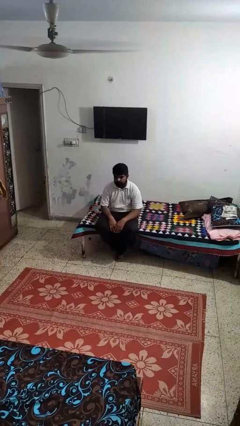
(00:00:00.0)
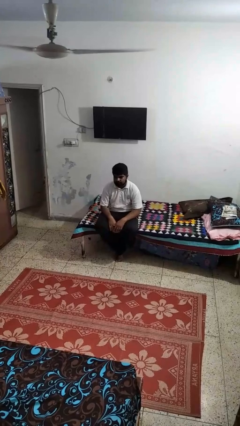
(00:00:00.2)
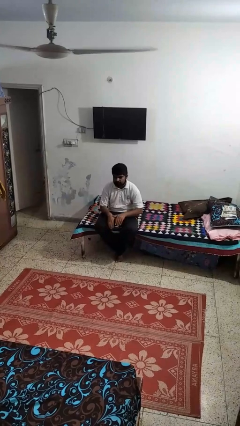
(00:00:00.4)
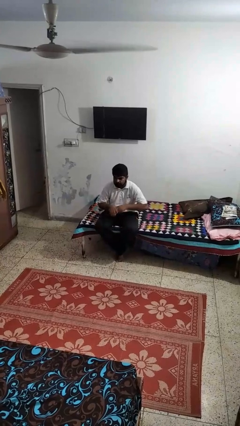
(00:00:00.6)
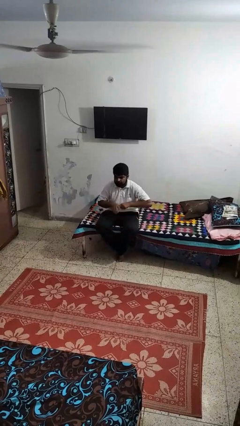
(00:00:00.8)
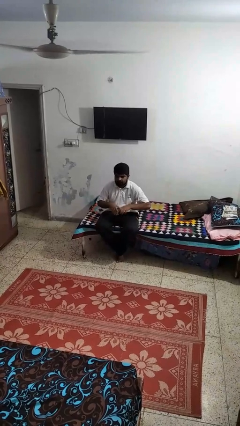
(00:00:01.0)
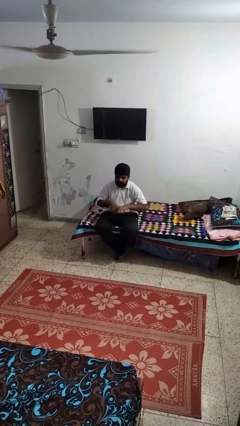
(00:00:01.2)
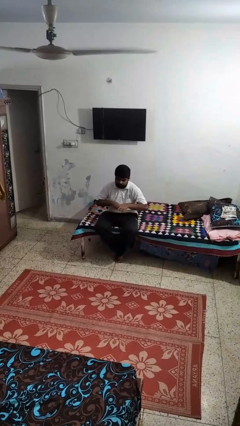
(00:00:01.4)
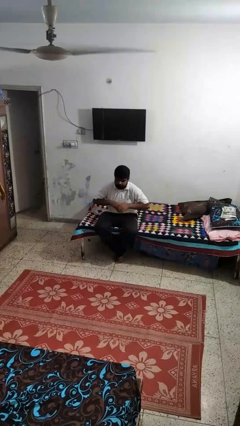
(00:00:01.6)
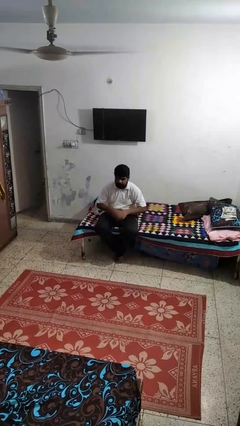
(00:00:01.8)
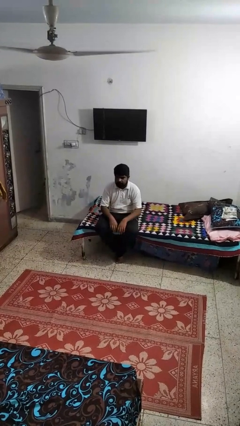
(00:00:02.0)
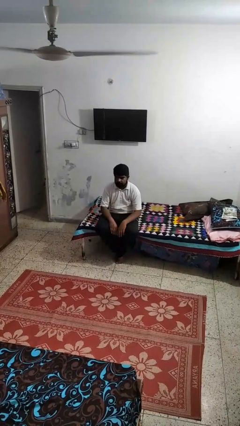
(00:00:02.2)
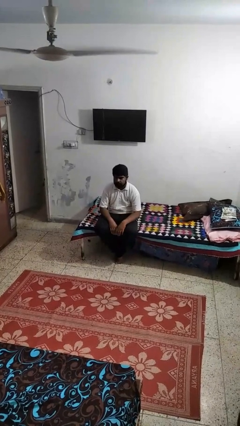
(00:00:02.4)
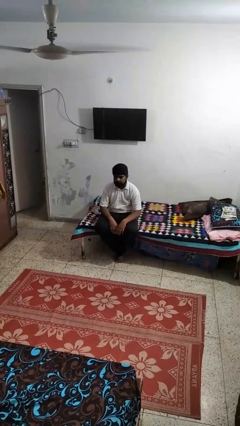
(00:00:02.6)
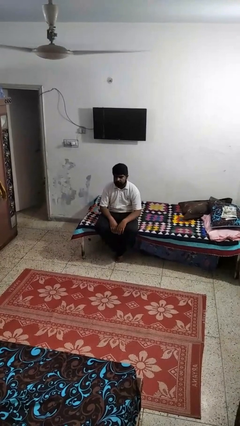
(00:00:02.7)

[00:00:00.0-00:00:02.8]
person cracks knuckles

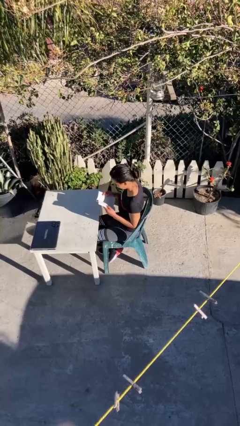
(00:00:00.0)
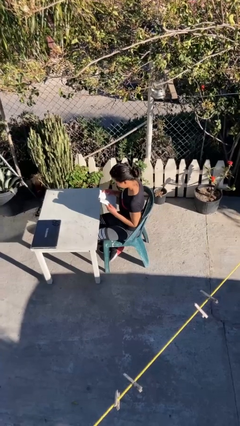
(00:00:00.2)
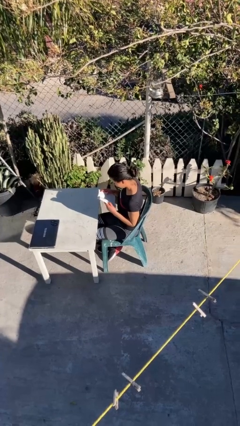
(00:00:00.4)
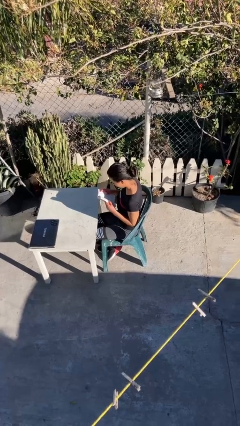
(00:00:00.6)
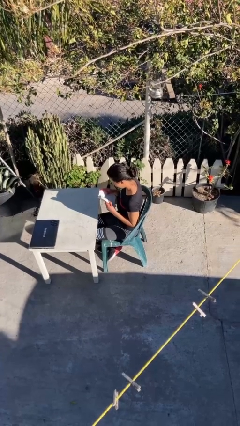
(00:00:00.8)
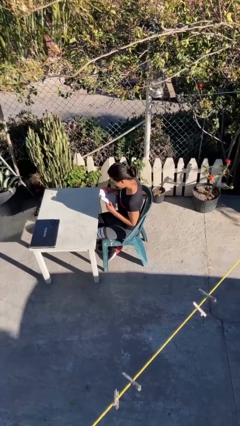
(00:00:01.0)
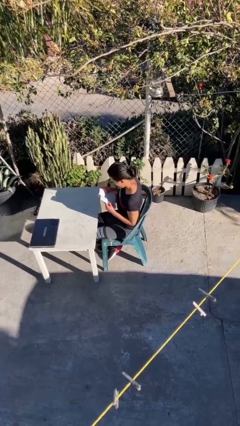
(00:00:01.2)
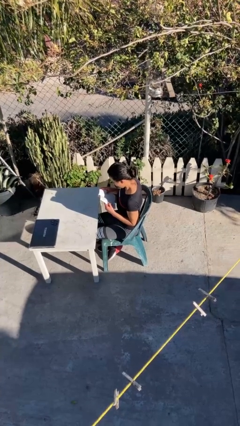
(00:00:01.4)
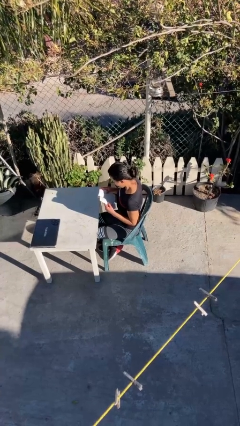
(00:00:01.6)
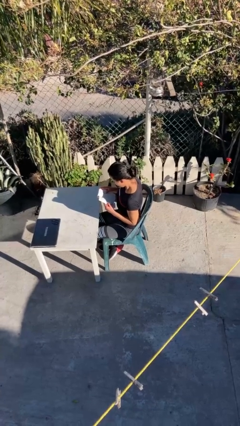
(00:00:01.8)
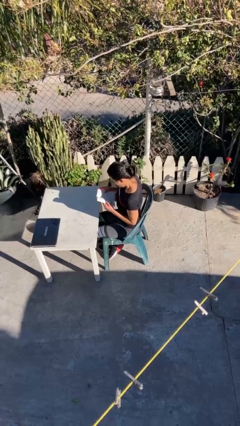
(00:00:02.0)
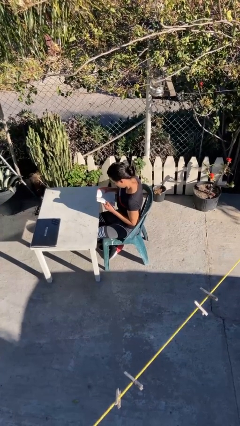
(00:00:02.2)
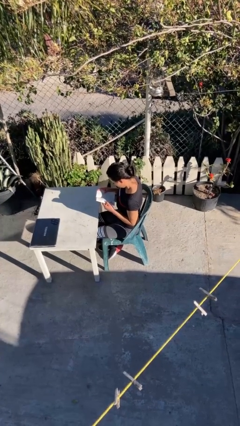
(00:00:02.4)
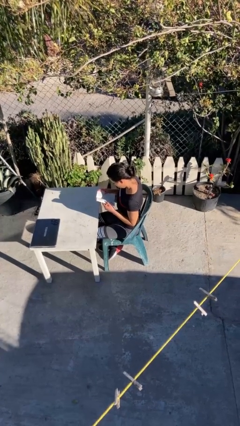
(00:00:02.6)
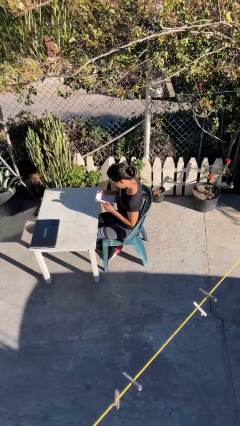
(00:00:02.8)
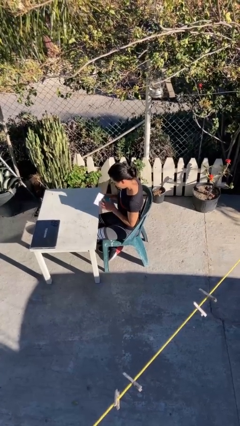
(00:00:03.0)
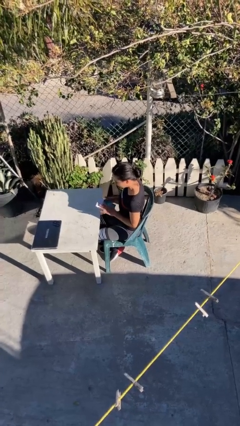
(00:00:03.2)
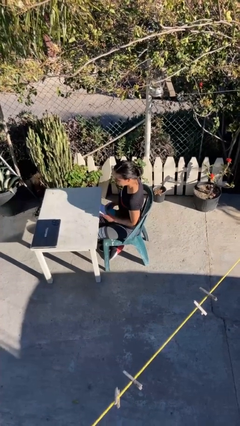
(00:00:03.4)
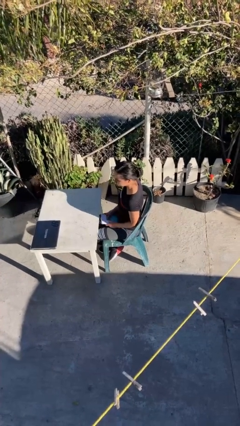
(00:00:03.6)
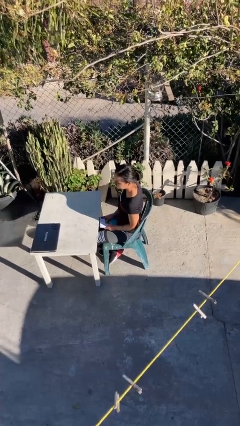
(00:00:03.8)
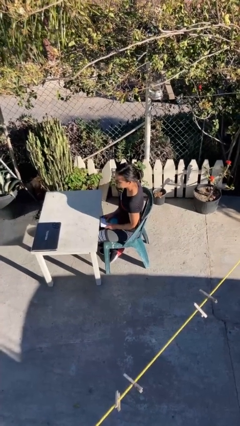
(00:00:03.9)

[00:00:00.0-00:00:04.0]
person reads document

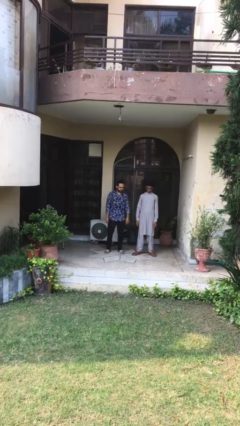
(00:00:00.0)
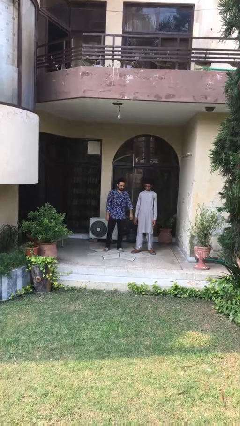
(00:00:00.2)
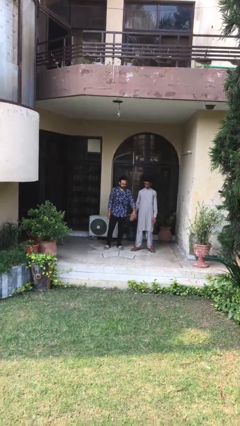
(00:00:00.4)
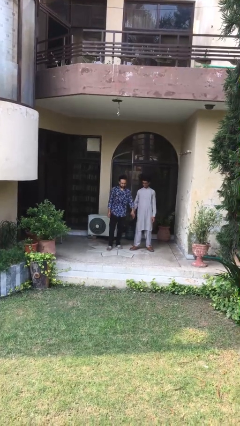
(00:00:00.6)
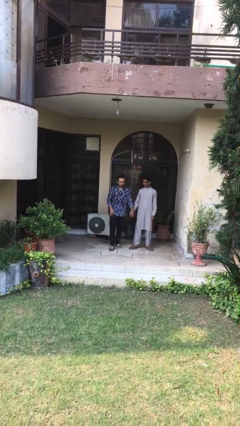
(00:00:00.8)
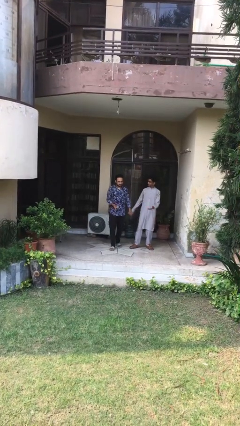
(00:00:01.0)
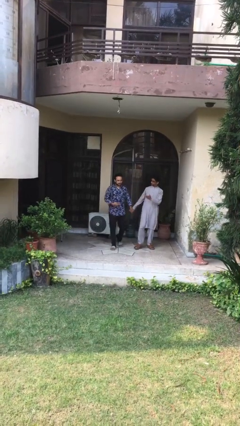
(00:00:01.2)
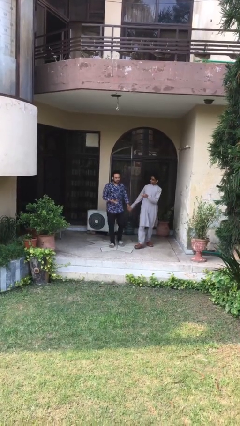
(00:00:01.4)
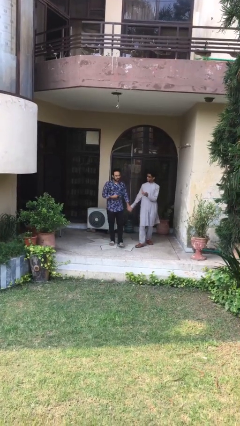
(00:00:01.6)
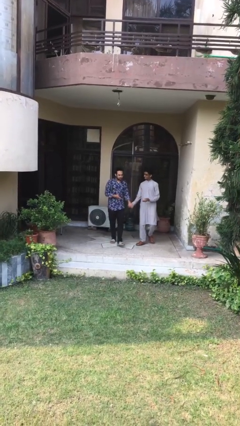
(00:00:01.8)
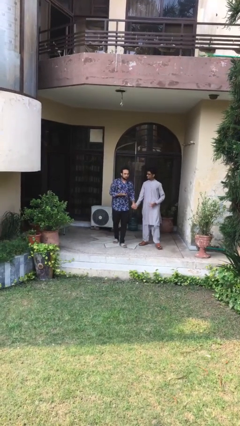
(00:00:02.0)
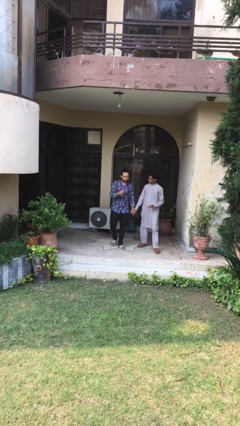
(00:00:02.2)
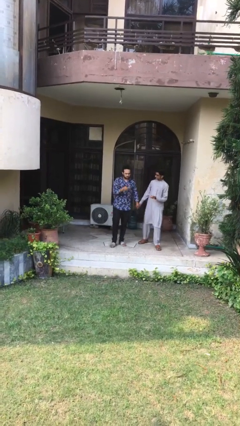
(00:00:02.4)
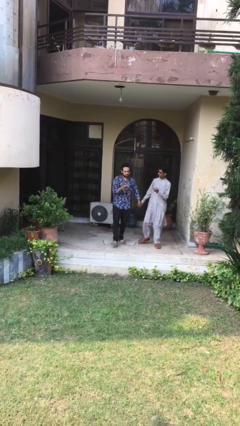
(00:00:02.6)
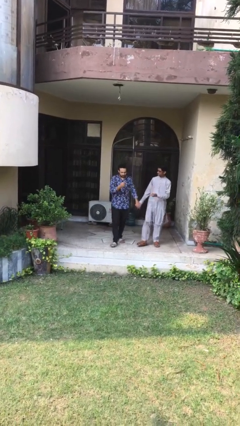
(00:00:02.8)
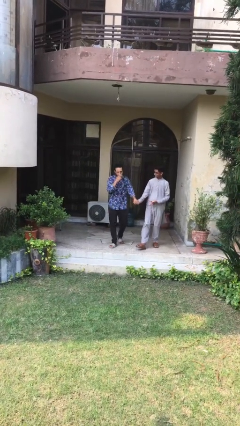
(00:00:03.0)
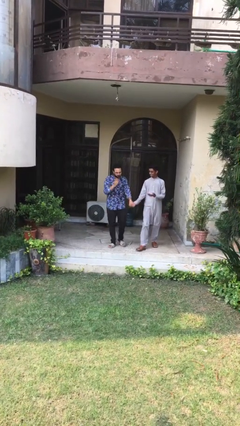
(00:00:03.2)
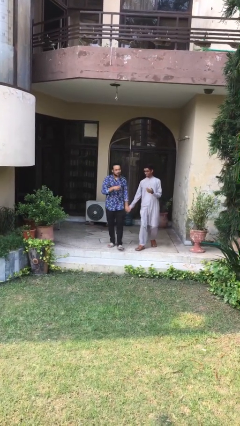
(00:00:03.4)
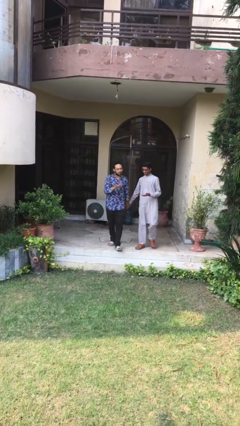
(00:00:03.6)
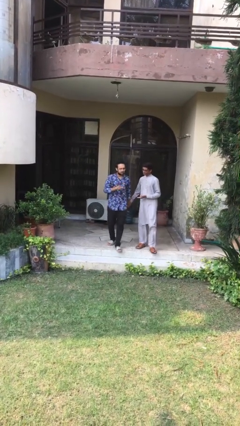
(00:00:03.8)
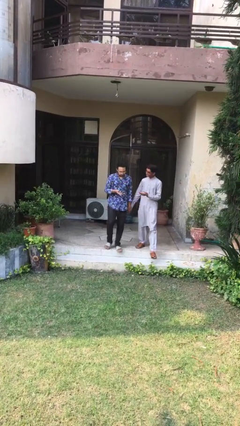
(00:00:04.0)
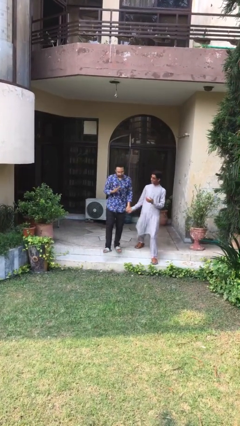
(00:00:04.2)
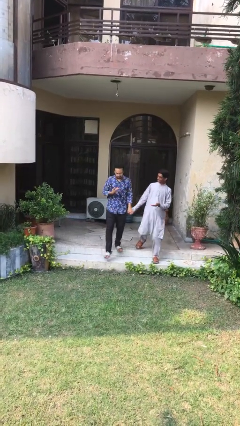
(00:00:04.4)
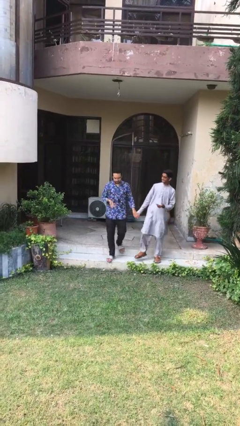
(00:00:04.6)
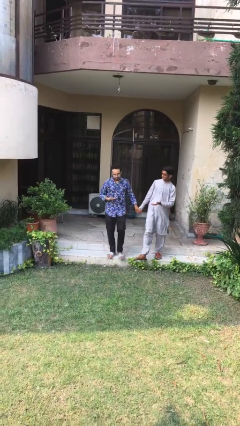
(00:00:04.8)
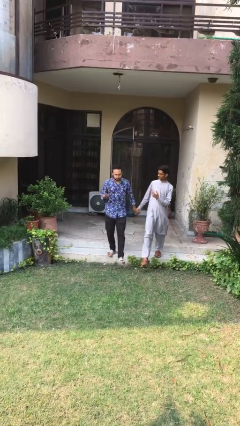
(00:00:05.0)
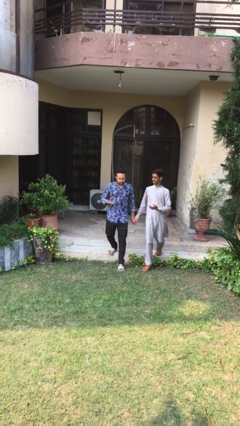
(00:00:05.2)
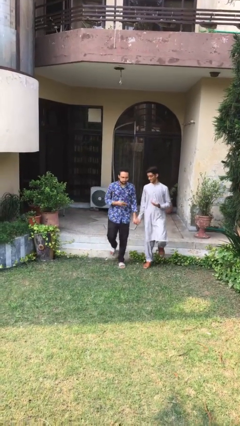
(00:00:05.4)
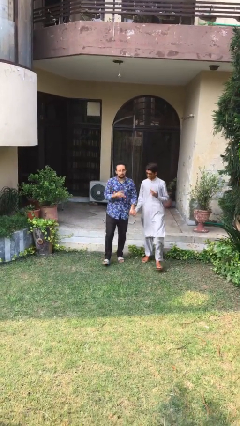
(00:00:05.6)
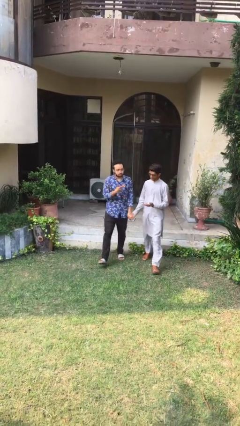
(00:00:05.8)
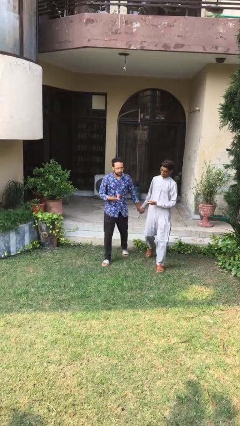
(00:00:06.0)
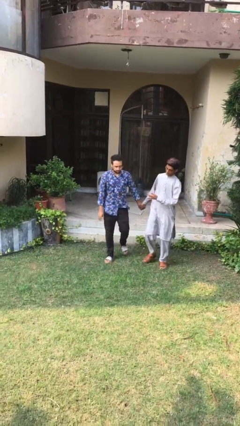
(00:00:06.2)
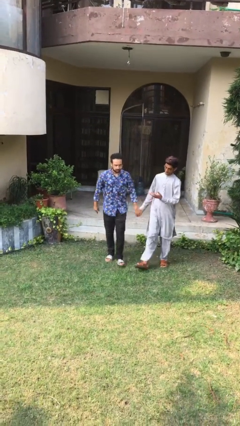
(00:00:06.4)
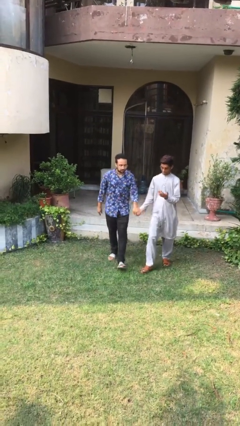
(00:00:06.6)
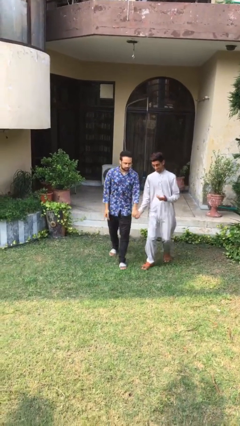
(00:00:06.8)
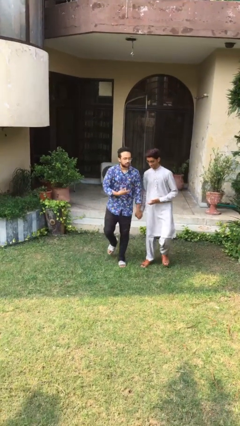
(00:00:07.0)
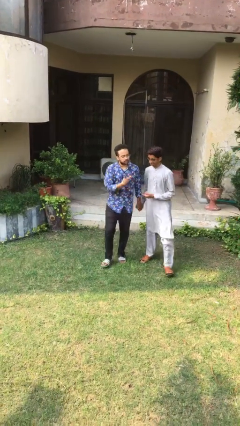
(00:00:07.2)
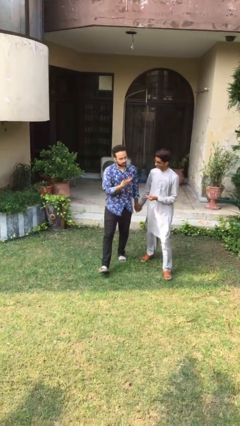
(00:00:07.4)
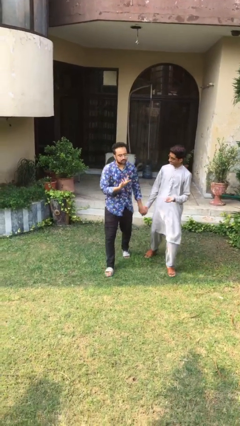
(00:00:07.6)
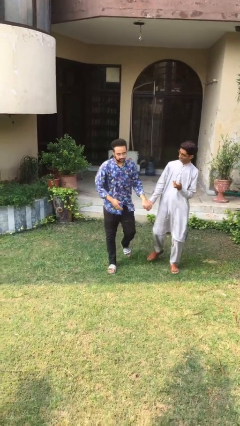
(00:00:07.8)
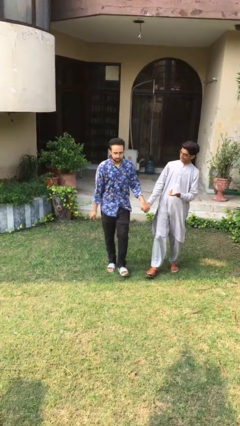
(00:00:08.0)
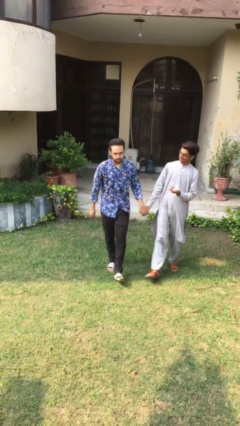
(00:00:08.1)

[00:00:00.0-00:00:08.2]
person holds hand

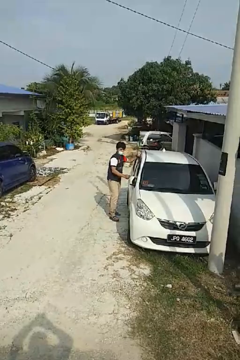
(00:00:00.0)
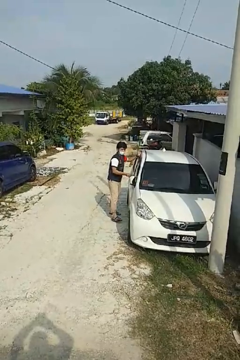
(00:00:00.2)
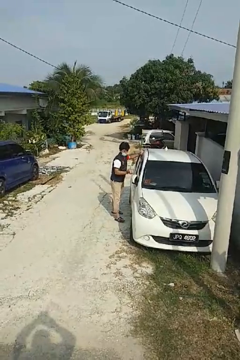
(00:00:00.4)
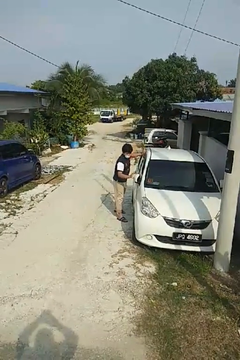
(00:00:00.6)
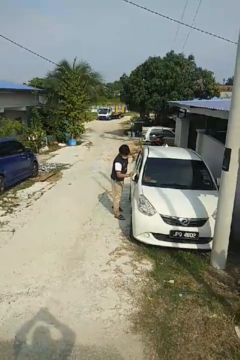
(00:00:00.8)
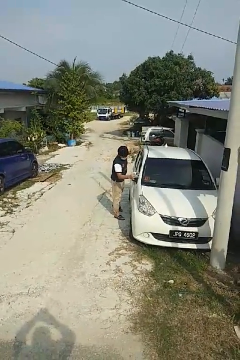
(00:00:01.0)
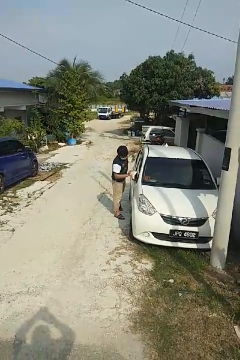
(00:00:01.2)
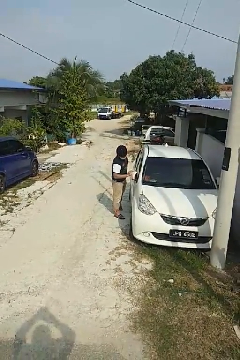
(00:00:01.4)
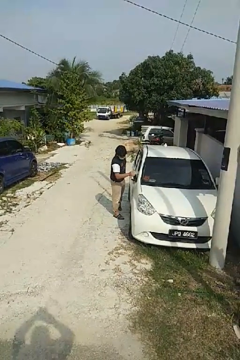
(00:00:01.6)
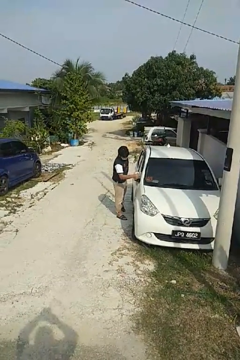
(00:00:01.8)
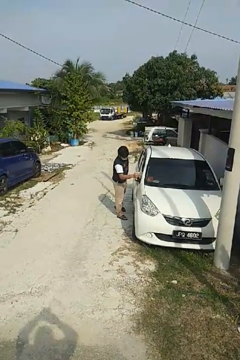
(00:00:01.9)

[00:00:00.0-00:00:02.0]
person polishes car with rag

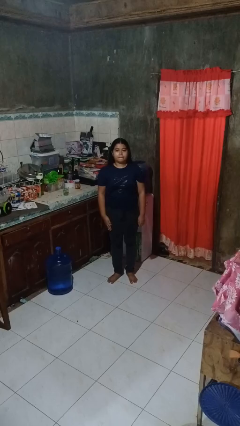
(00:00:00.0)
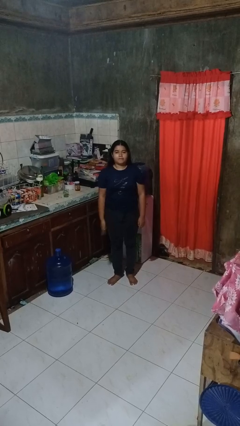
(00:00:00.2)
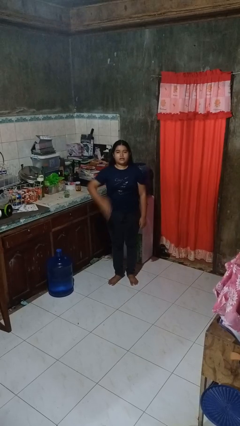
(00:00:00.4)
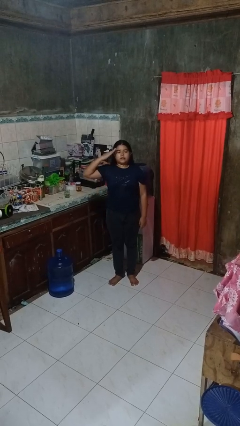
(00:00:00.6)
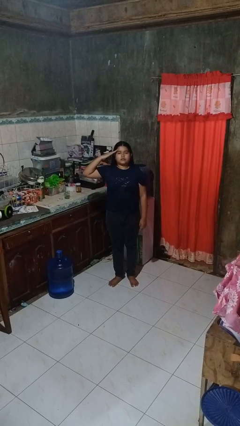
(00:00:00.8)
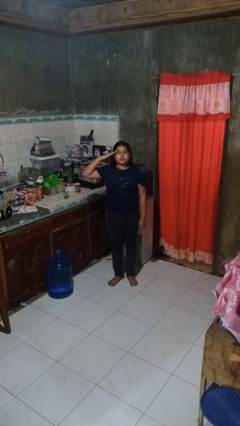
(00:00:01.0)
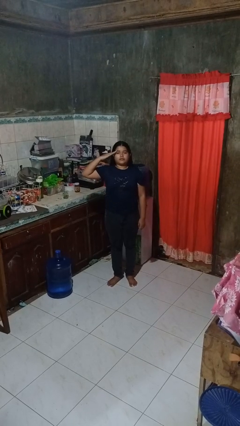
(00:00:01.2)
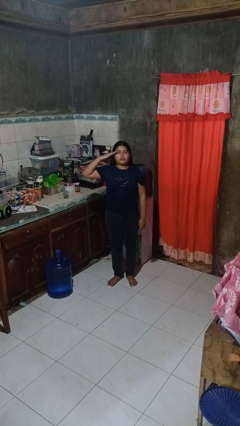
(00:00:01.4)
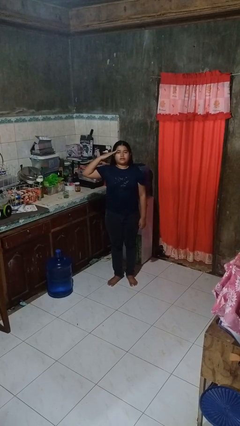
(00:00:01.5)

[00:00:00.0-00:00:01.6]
person salutes
